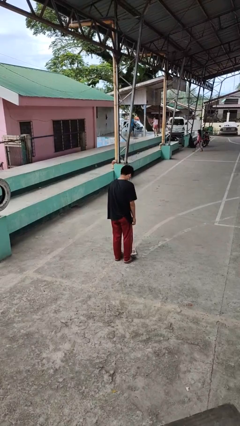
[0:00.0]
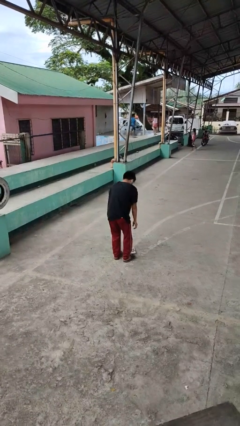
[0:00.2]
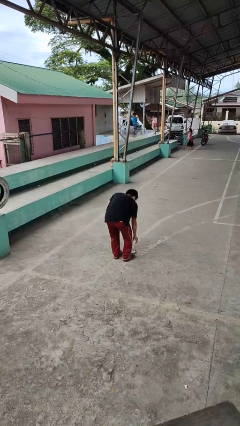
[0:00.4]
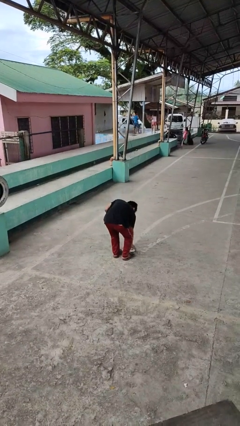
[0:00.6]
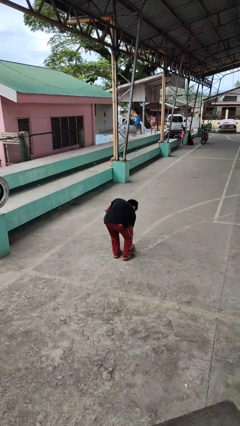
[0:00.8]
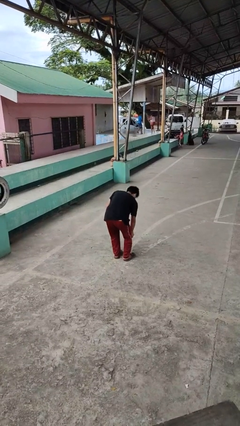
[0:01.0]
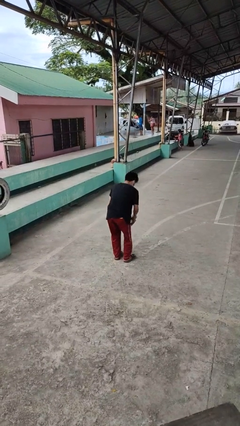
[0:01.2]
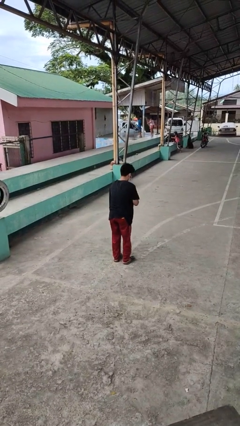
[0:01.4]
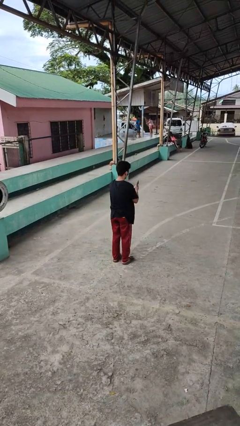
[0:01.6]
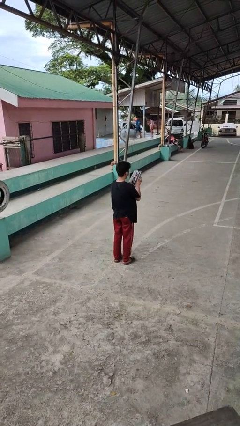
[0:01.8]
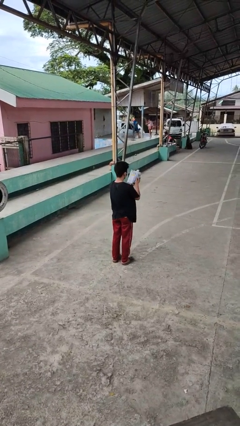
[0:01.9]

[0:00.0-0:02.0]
person picks up object from floor

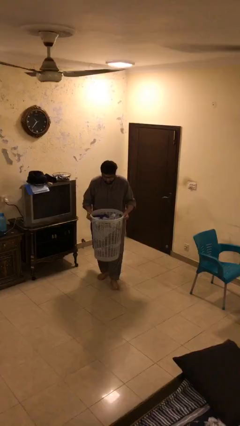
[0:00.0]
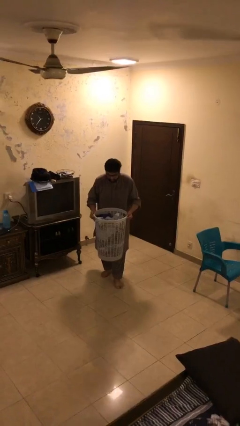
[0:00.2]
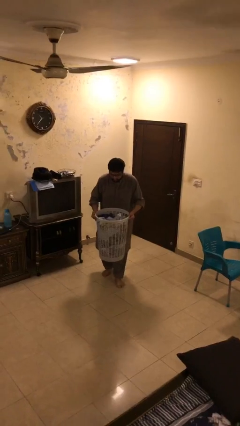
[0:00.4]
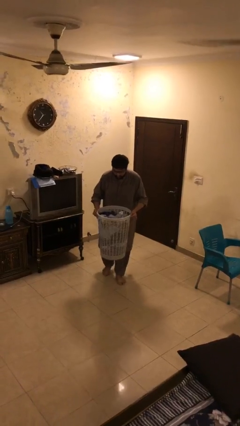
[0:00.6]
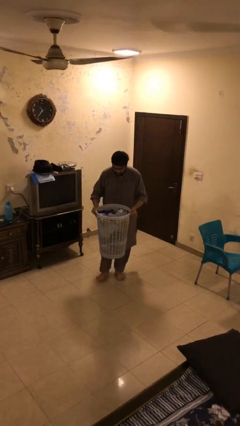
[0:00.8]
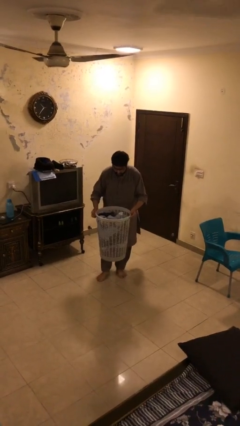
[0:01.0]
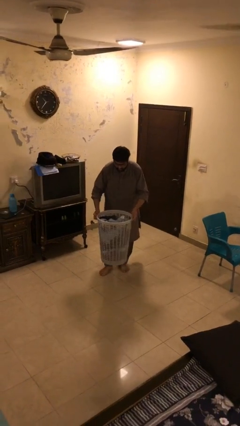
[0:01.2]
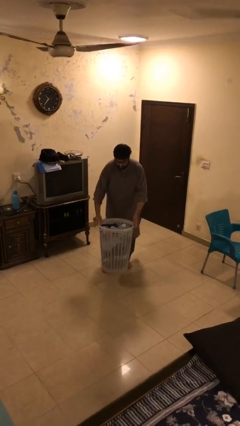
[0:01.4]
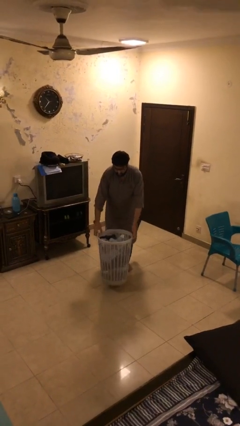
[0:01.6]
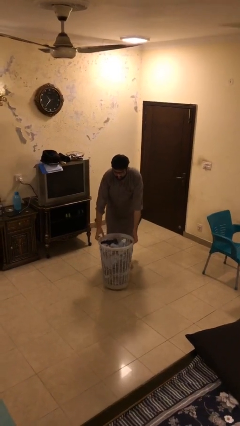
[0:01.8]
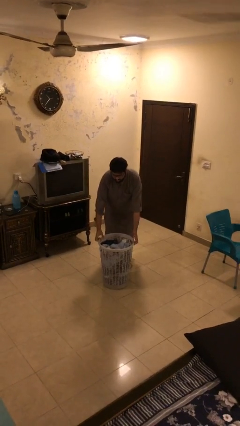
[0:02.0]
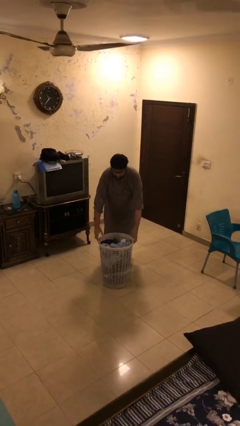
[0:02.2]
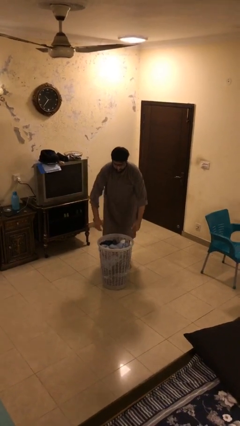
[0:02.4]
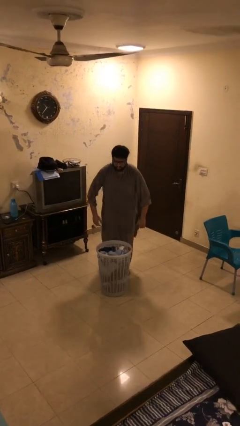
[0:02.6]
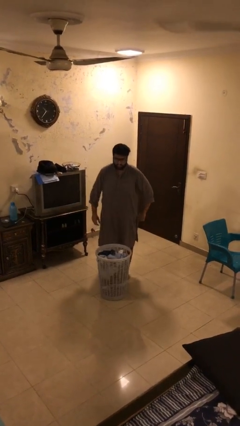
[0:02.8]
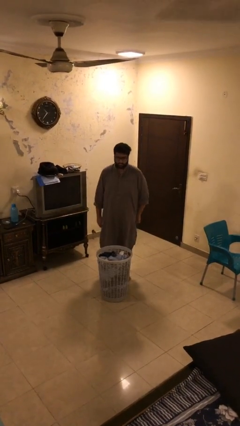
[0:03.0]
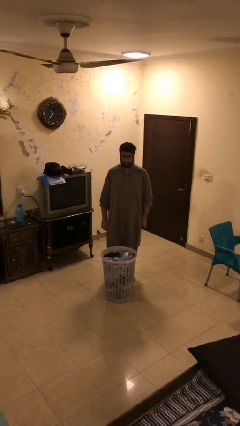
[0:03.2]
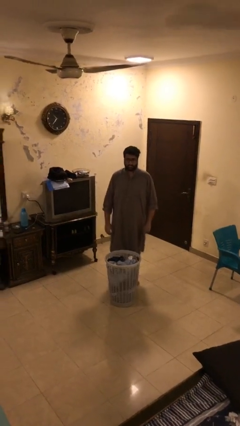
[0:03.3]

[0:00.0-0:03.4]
person puts down object on floor

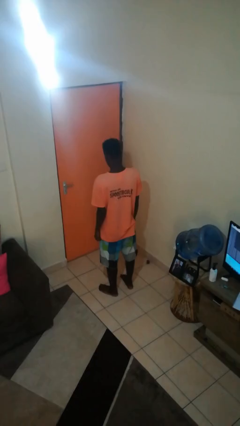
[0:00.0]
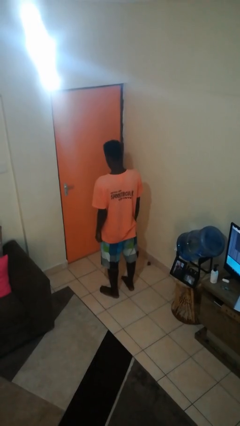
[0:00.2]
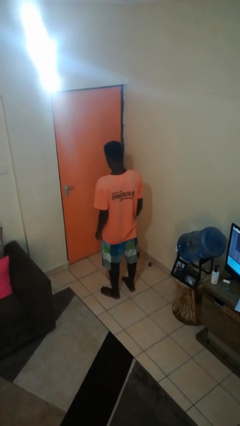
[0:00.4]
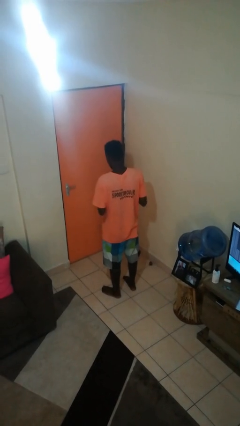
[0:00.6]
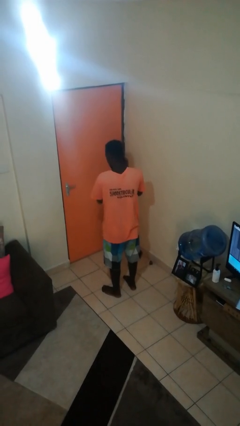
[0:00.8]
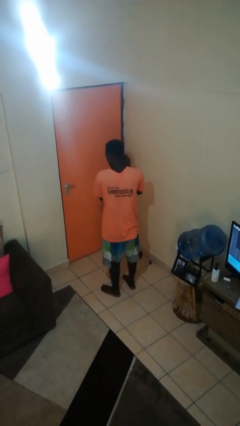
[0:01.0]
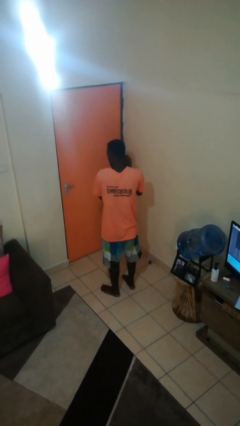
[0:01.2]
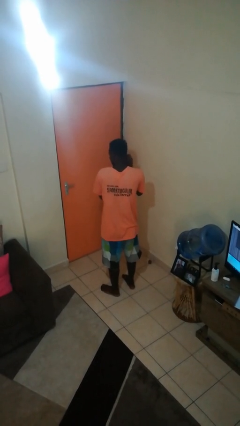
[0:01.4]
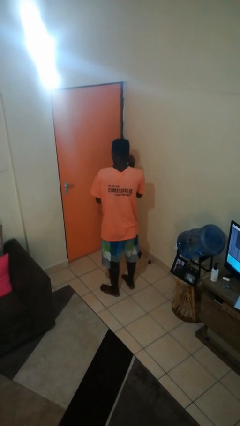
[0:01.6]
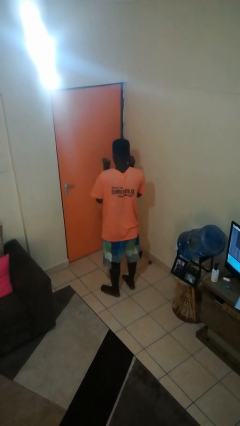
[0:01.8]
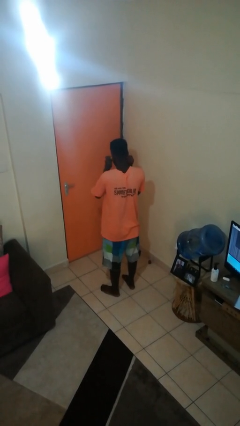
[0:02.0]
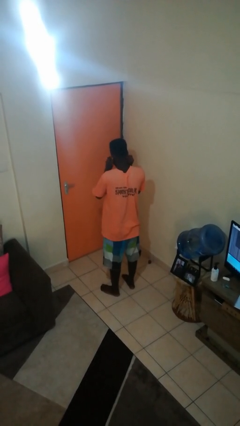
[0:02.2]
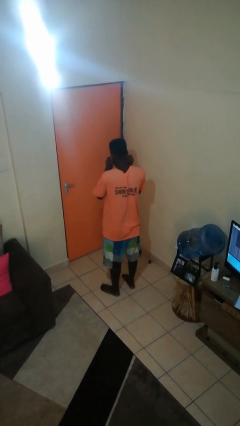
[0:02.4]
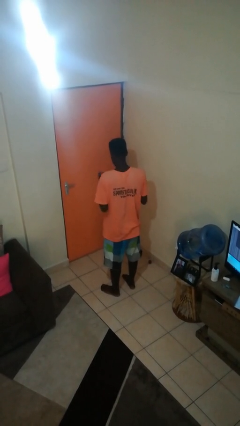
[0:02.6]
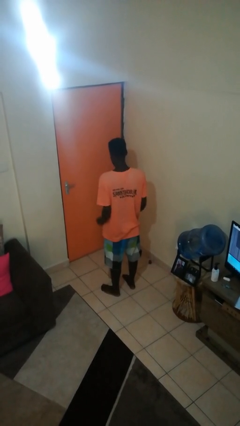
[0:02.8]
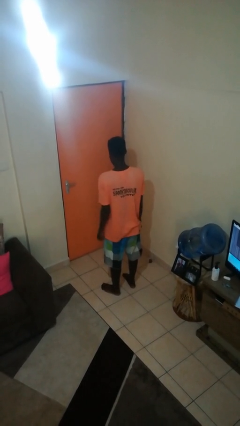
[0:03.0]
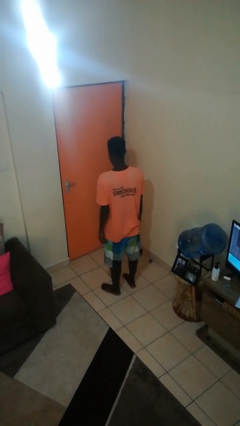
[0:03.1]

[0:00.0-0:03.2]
person puts on earrings

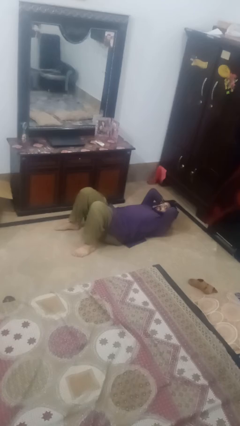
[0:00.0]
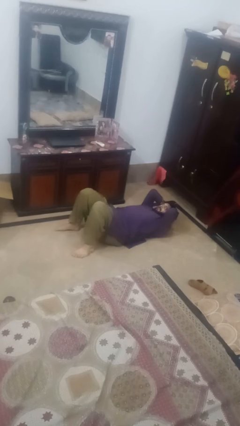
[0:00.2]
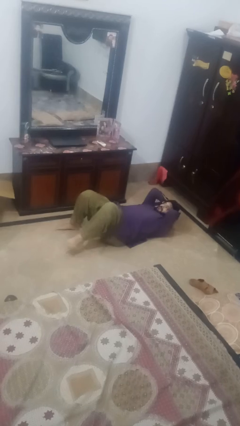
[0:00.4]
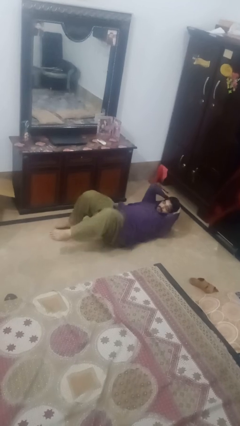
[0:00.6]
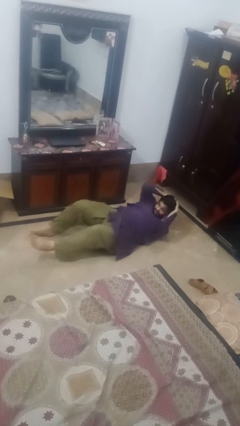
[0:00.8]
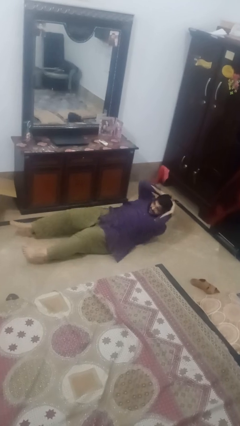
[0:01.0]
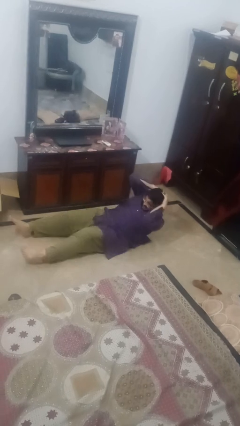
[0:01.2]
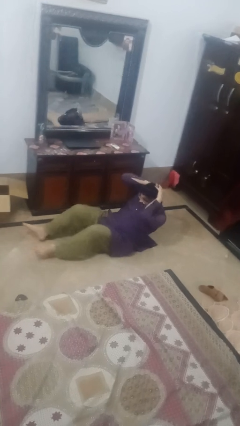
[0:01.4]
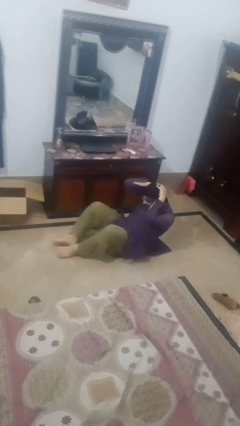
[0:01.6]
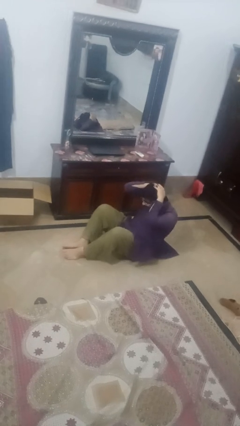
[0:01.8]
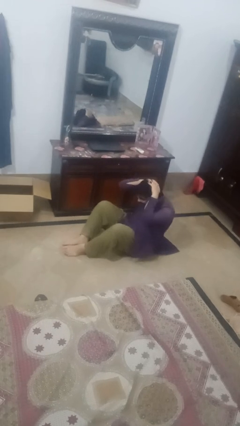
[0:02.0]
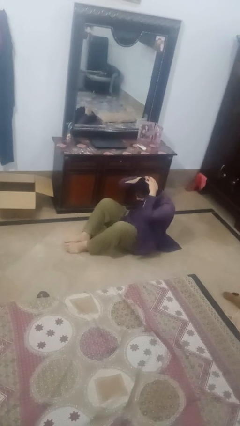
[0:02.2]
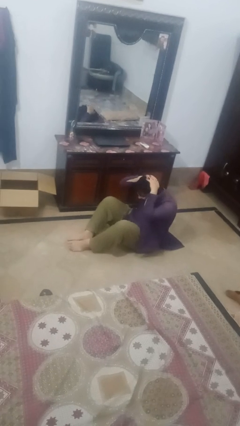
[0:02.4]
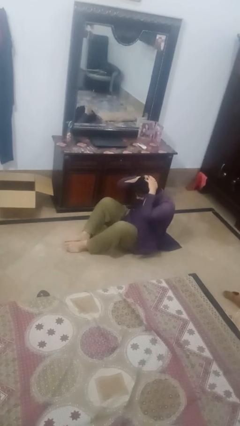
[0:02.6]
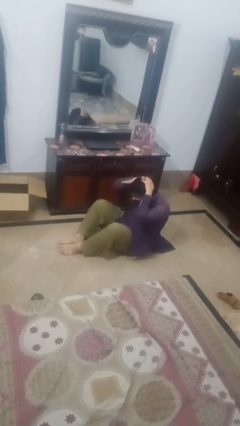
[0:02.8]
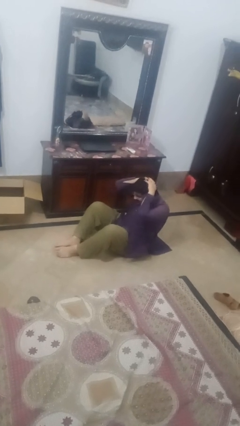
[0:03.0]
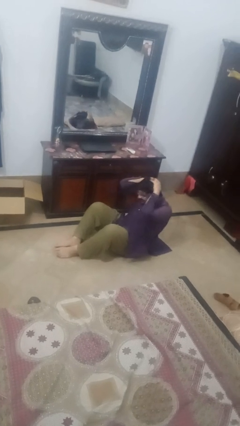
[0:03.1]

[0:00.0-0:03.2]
person exercises with situp

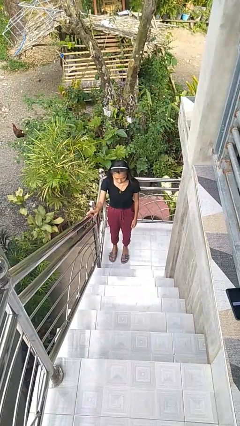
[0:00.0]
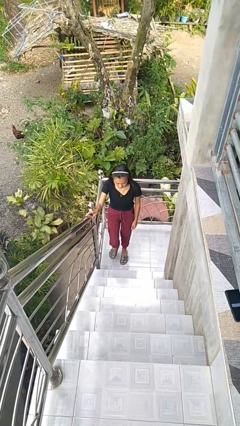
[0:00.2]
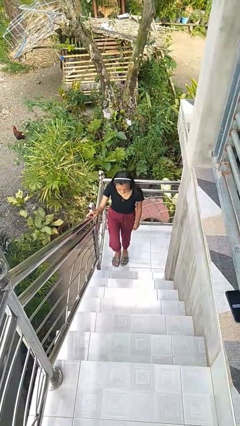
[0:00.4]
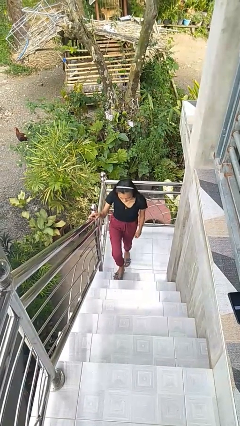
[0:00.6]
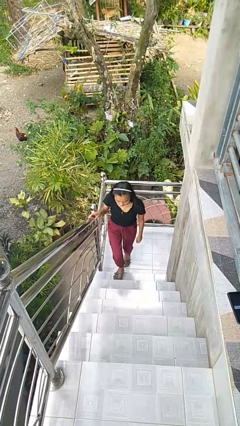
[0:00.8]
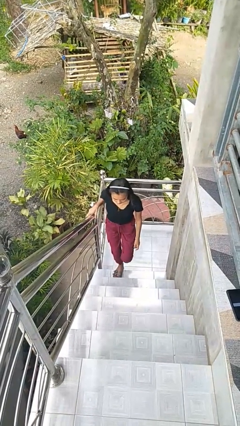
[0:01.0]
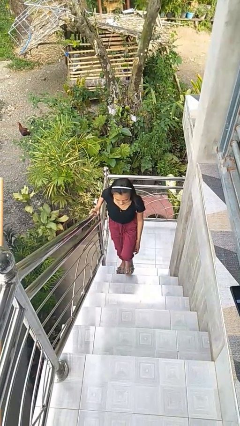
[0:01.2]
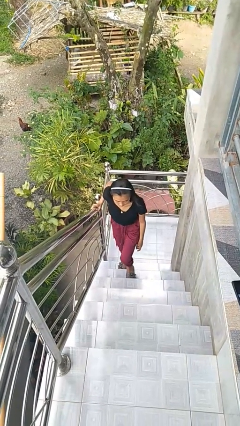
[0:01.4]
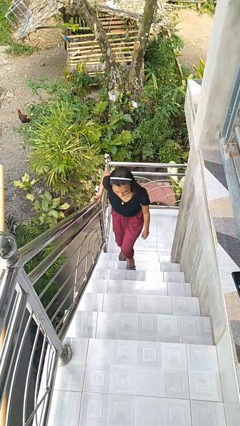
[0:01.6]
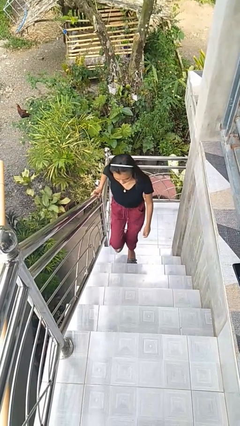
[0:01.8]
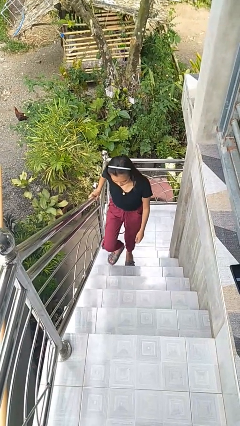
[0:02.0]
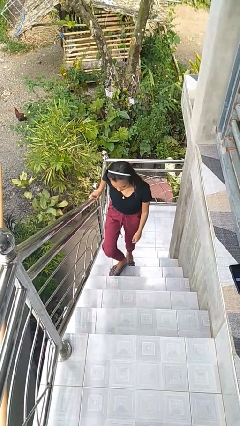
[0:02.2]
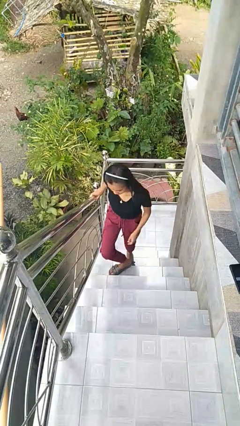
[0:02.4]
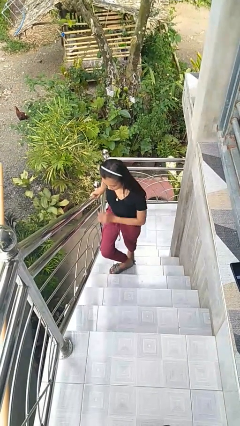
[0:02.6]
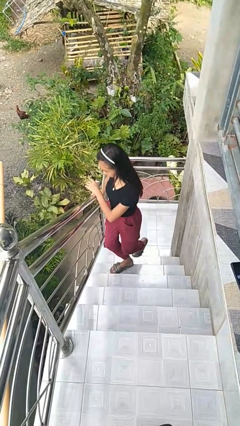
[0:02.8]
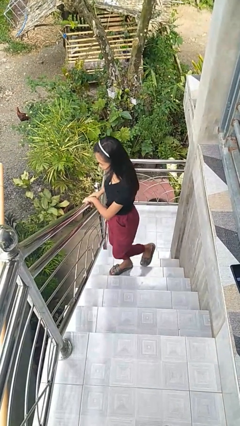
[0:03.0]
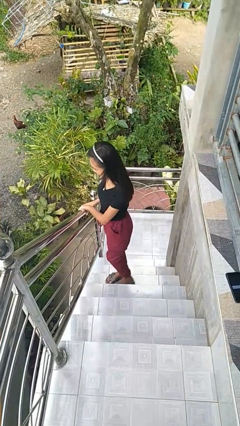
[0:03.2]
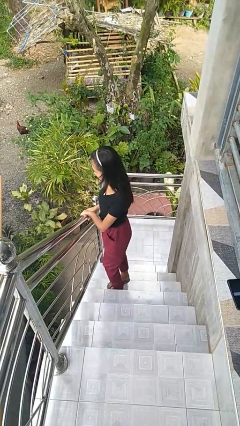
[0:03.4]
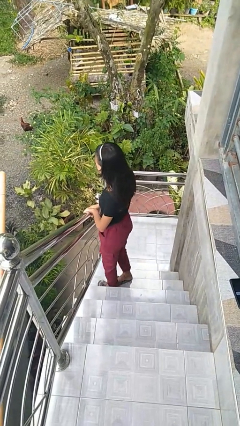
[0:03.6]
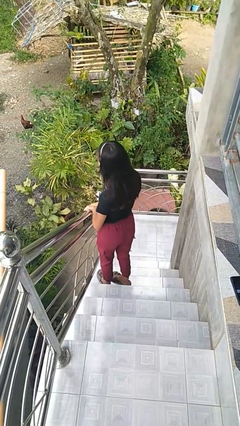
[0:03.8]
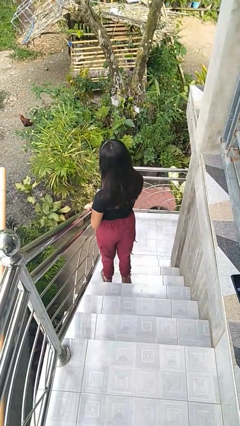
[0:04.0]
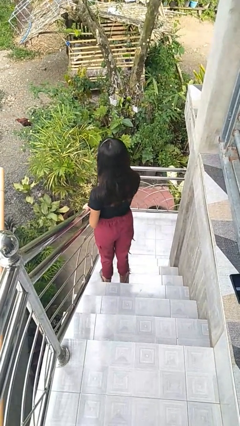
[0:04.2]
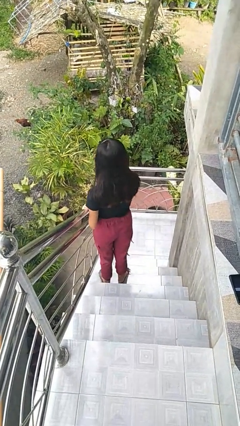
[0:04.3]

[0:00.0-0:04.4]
person climbs up stairs

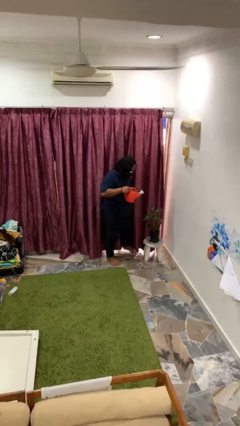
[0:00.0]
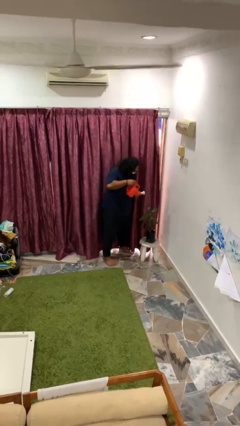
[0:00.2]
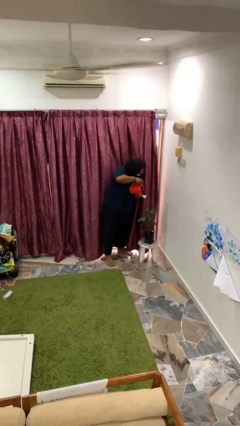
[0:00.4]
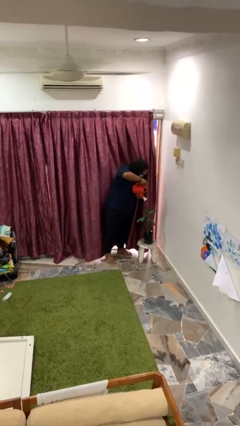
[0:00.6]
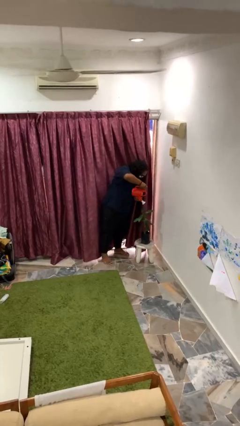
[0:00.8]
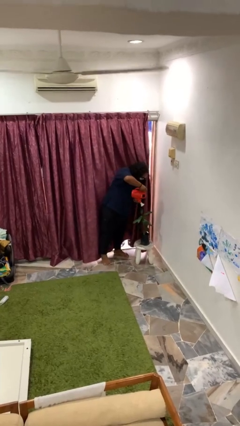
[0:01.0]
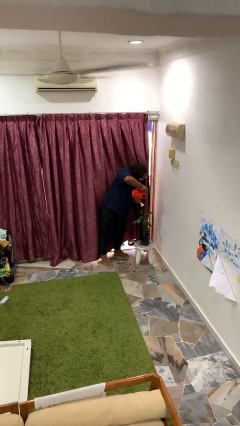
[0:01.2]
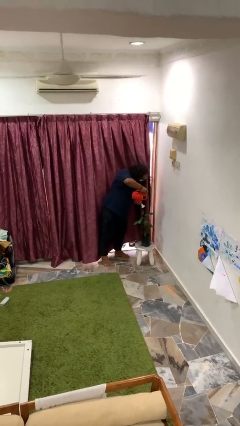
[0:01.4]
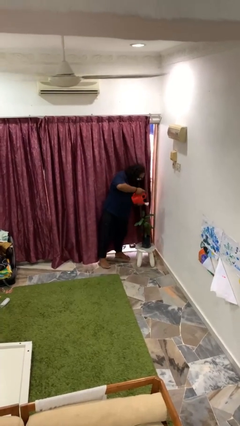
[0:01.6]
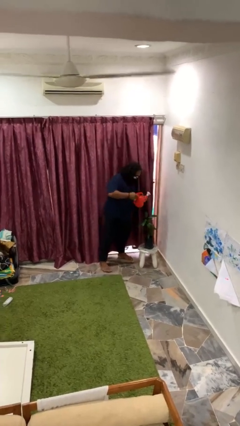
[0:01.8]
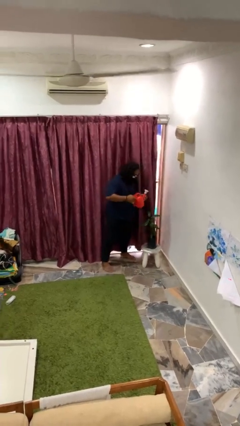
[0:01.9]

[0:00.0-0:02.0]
person waters houseplant
